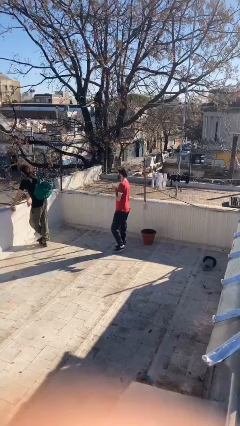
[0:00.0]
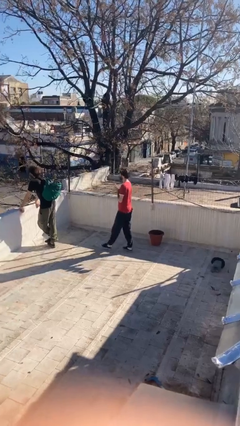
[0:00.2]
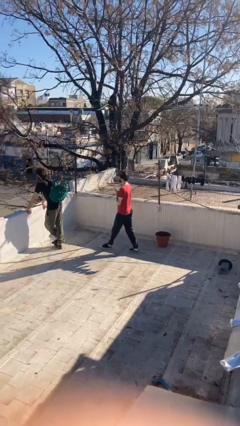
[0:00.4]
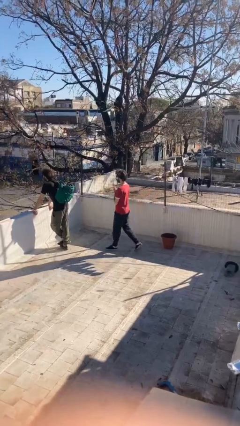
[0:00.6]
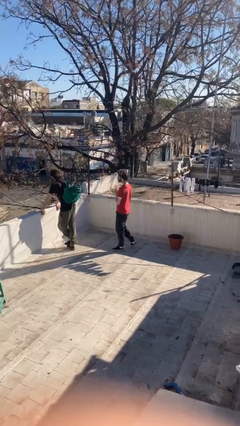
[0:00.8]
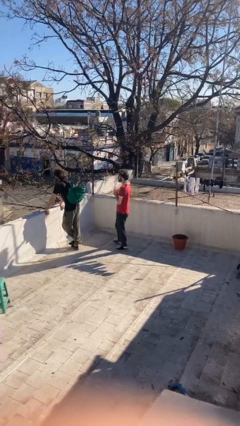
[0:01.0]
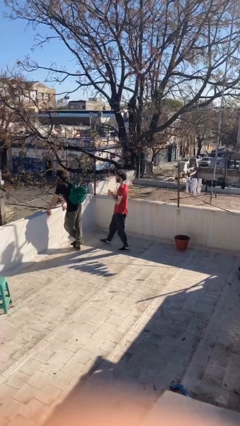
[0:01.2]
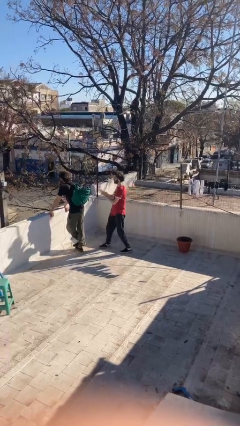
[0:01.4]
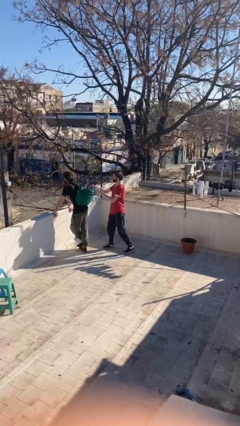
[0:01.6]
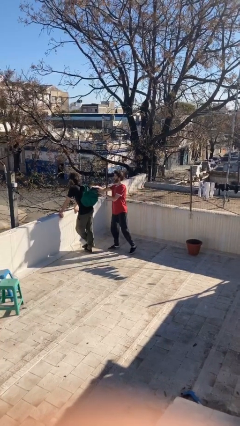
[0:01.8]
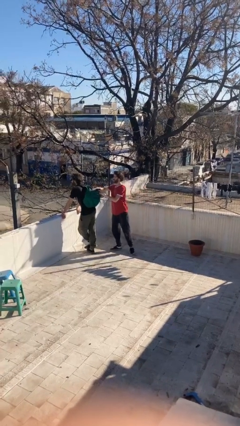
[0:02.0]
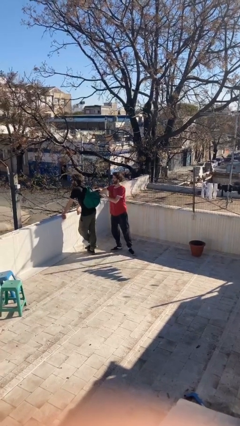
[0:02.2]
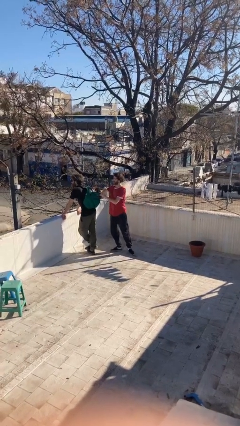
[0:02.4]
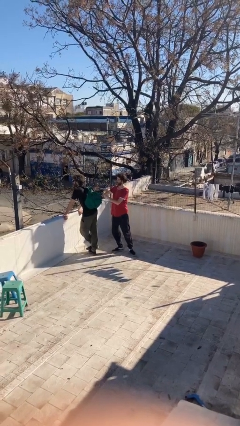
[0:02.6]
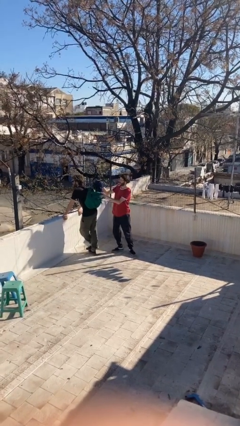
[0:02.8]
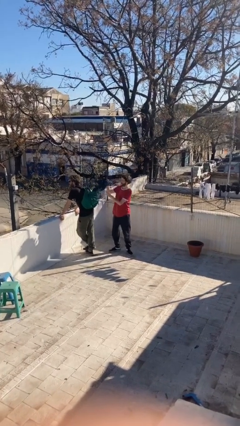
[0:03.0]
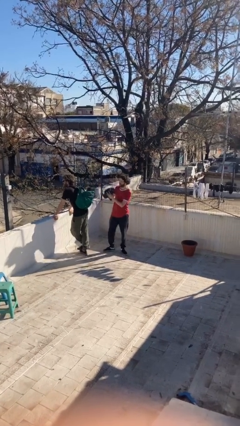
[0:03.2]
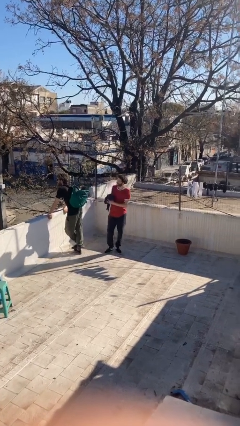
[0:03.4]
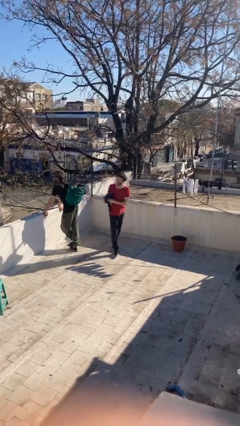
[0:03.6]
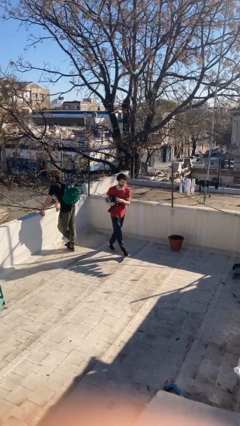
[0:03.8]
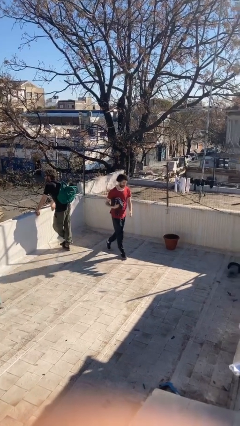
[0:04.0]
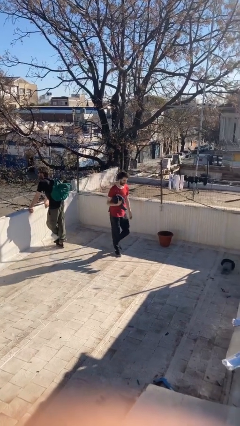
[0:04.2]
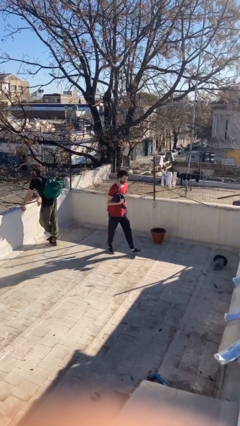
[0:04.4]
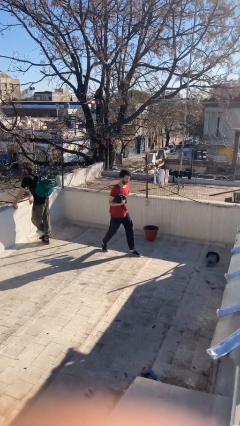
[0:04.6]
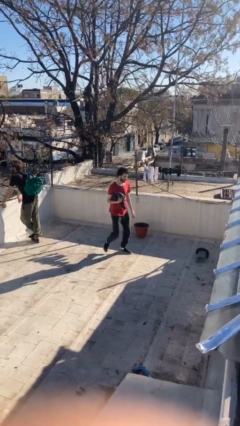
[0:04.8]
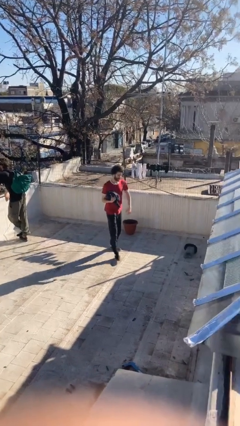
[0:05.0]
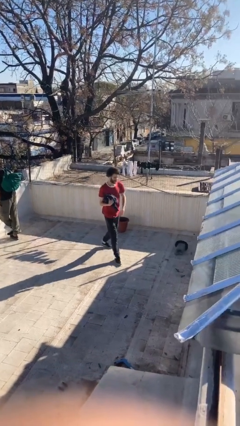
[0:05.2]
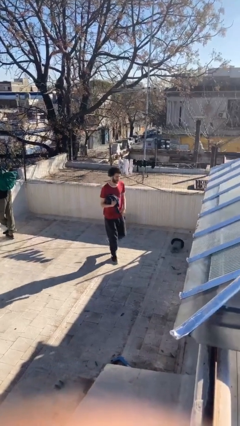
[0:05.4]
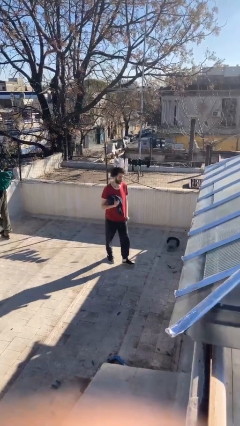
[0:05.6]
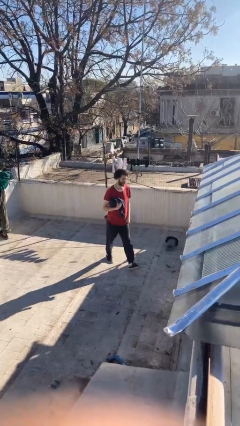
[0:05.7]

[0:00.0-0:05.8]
person steals object from person

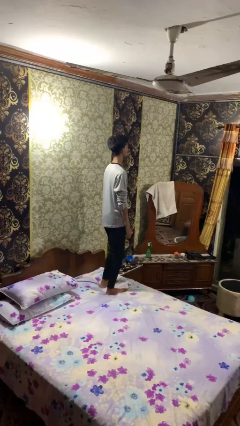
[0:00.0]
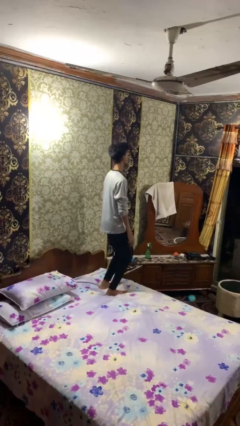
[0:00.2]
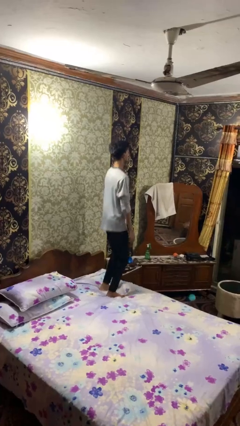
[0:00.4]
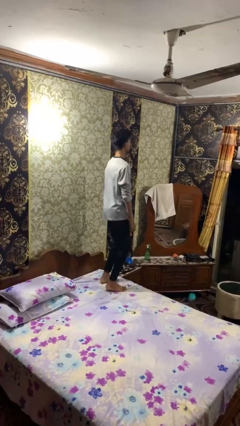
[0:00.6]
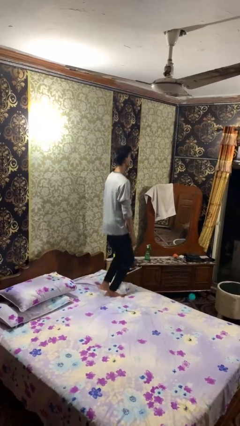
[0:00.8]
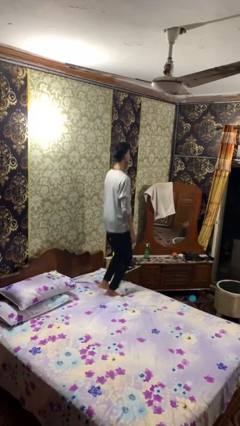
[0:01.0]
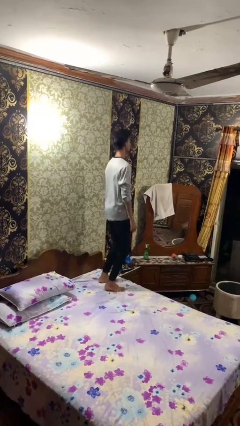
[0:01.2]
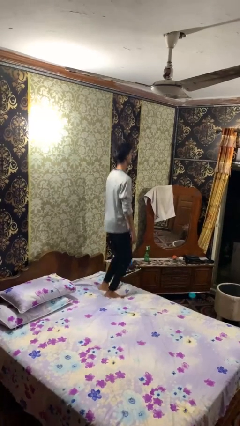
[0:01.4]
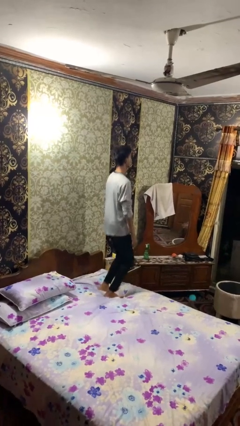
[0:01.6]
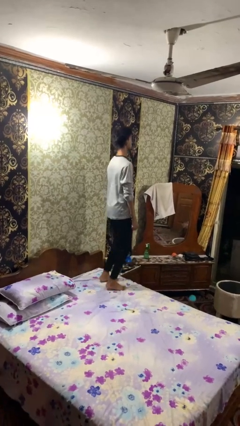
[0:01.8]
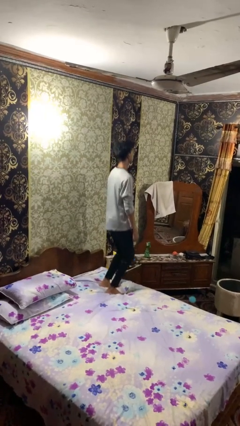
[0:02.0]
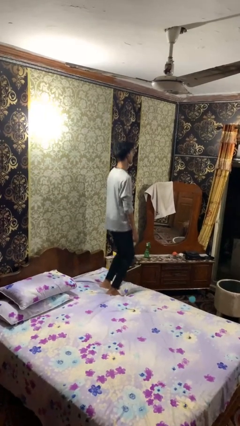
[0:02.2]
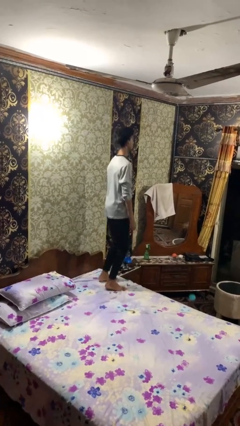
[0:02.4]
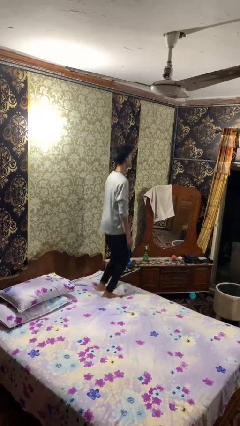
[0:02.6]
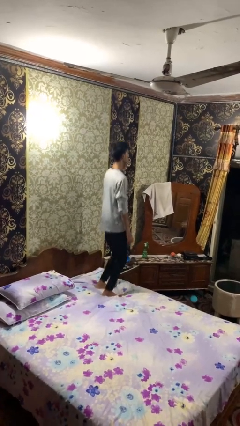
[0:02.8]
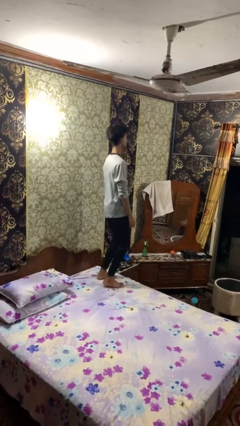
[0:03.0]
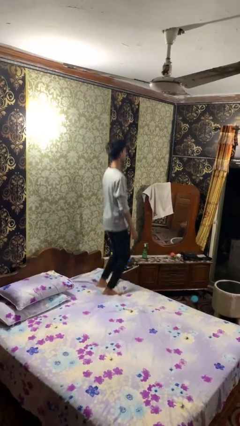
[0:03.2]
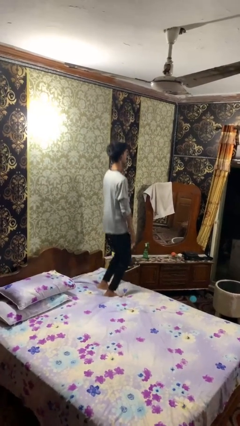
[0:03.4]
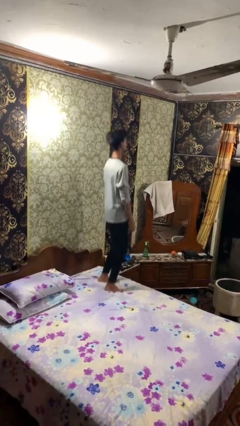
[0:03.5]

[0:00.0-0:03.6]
person jumps on bed

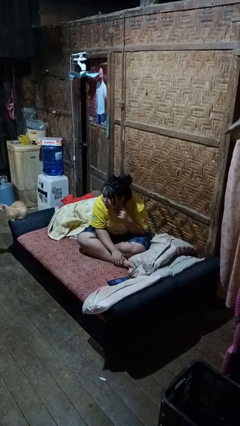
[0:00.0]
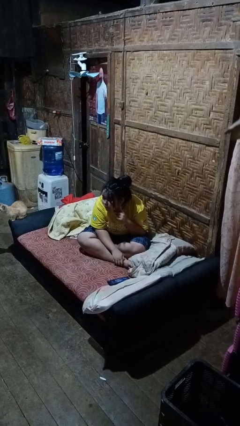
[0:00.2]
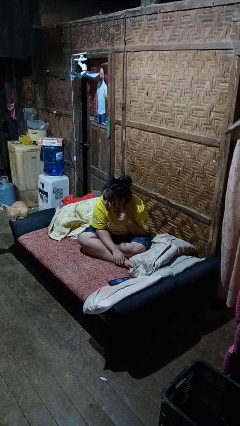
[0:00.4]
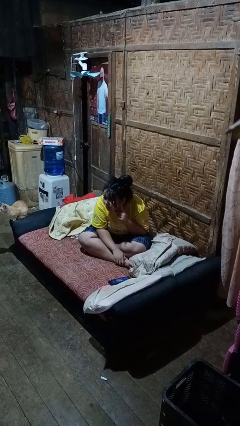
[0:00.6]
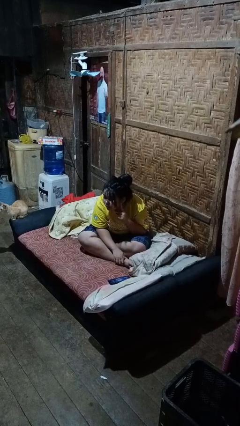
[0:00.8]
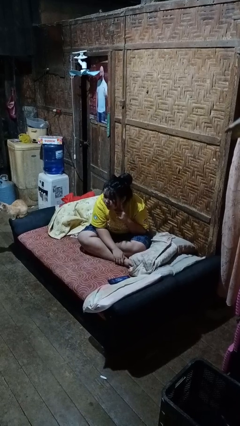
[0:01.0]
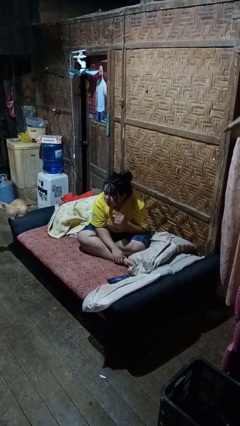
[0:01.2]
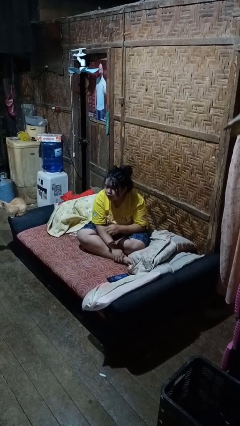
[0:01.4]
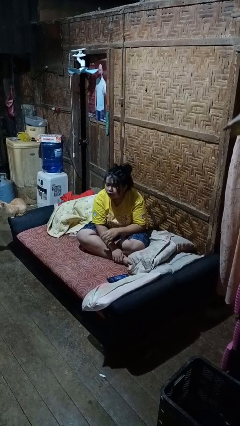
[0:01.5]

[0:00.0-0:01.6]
person gestures listen closely

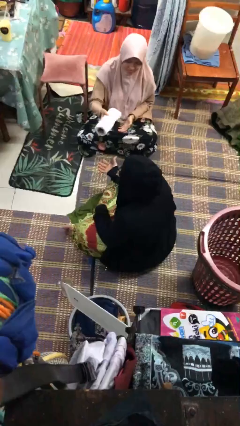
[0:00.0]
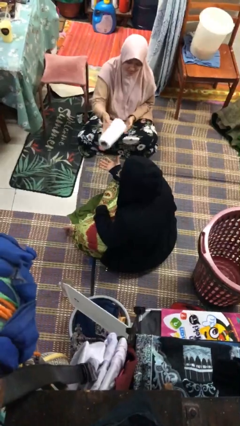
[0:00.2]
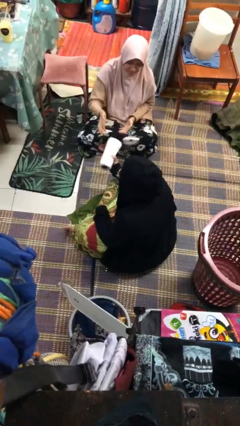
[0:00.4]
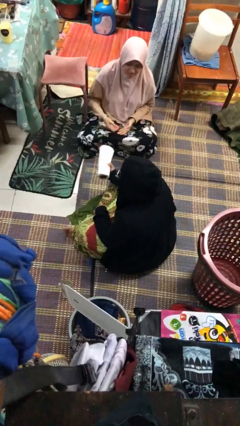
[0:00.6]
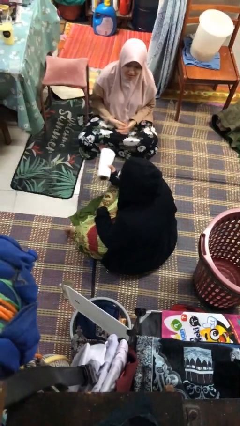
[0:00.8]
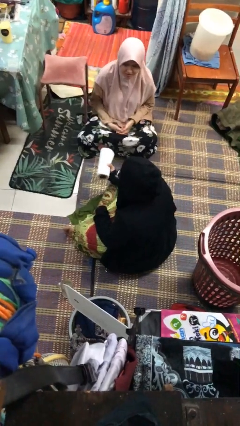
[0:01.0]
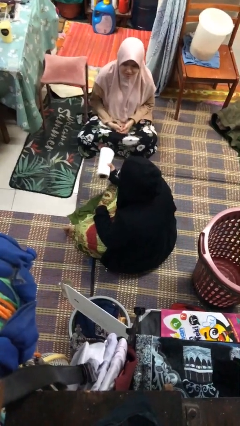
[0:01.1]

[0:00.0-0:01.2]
person catches object from person

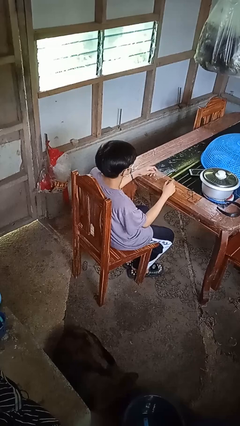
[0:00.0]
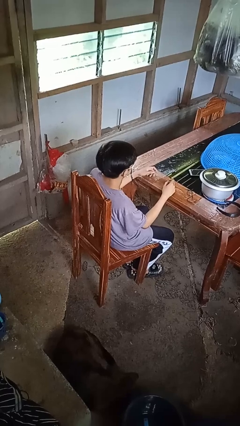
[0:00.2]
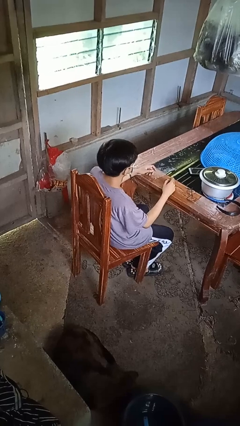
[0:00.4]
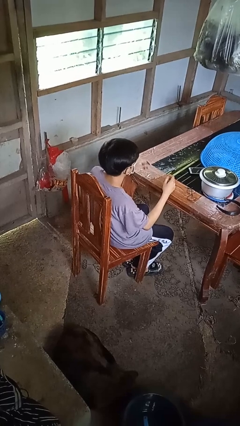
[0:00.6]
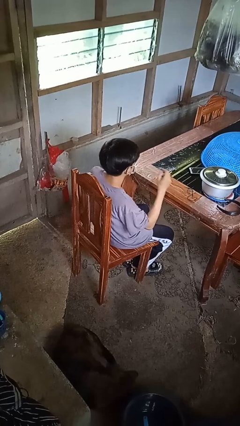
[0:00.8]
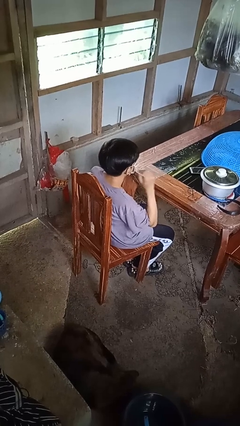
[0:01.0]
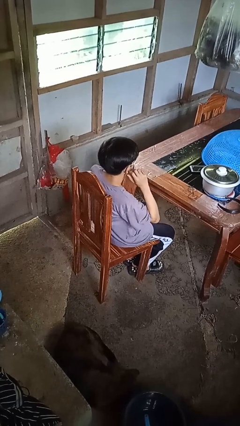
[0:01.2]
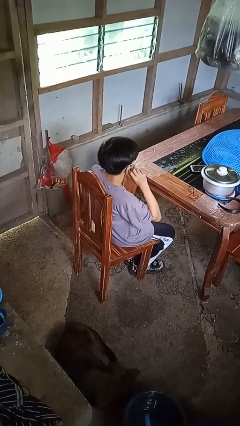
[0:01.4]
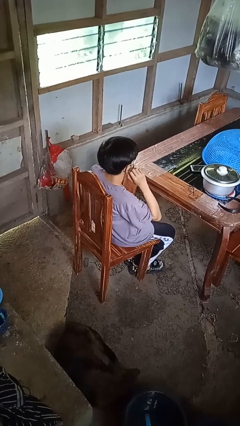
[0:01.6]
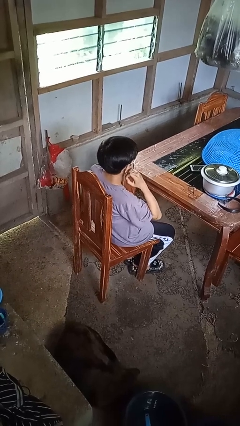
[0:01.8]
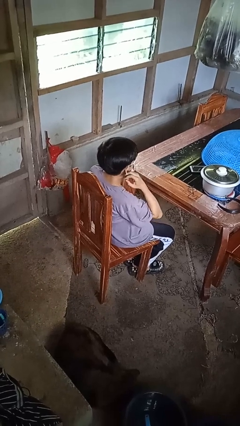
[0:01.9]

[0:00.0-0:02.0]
person takes off facemask

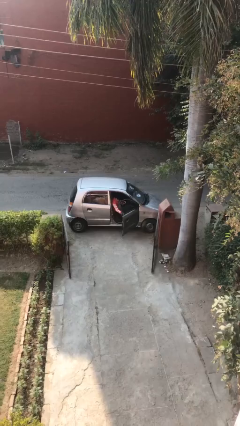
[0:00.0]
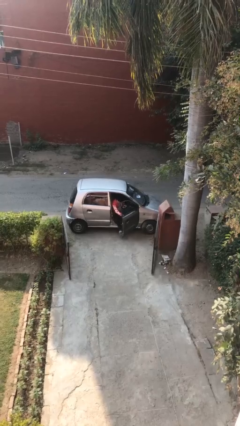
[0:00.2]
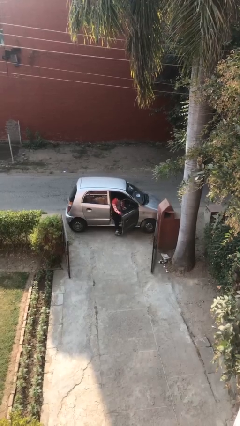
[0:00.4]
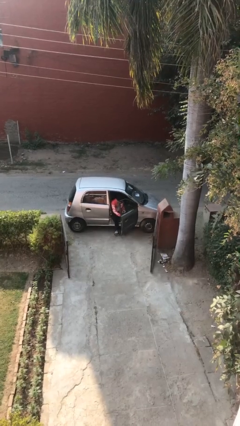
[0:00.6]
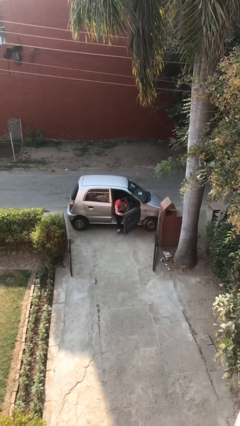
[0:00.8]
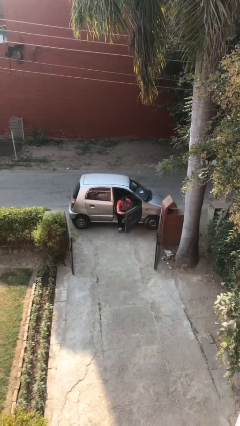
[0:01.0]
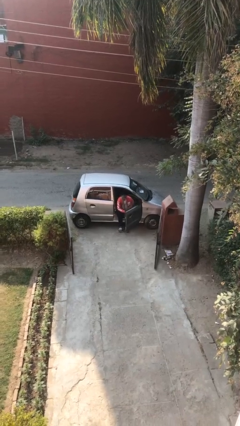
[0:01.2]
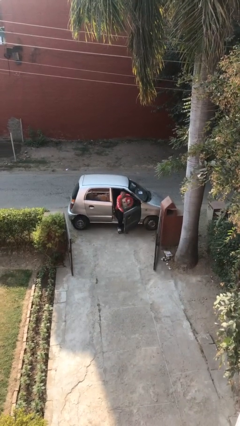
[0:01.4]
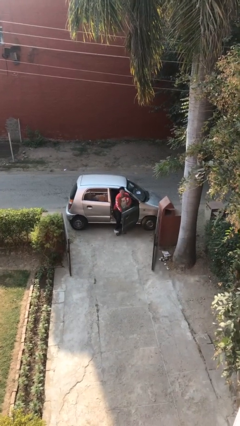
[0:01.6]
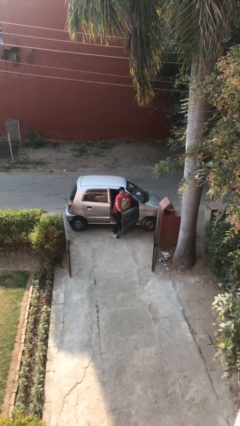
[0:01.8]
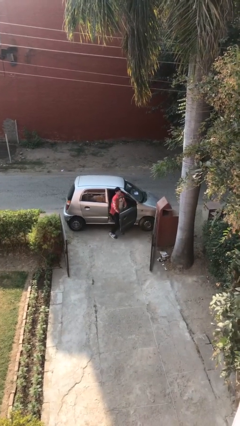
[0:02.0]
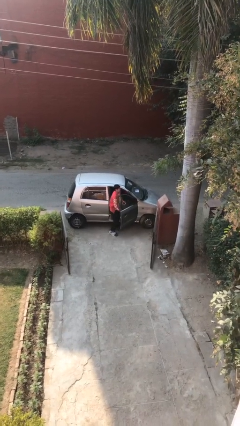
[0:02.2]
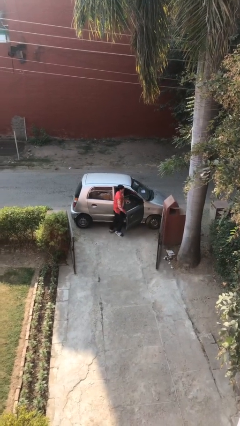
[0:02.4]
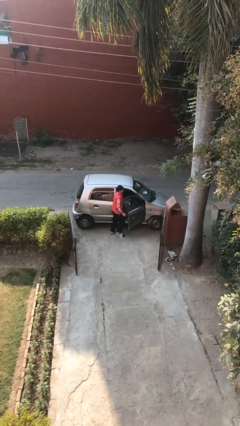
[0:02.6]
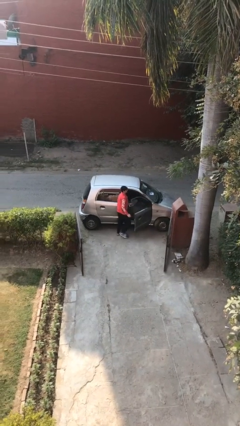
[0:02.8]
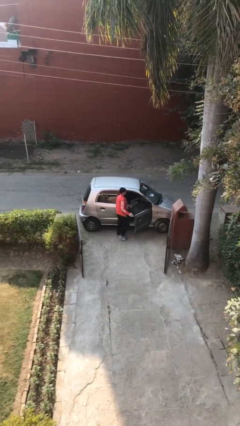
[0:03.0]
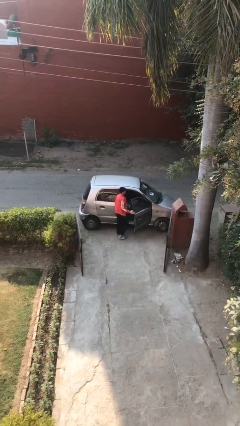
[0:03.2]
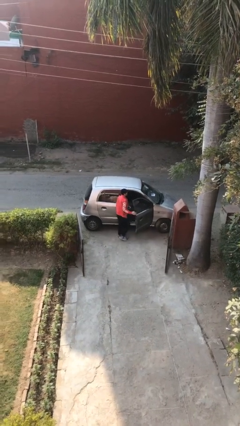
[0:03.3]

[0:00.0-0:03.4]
person exits car
